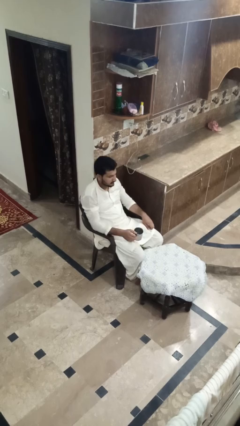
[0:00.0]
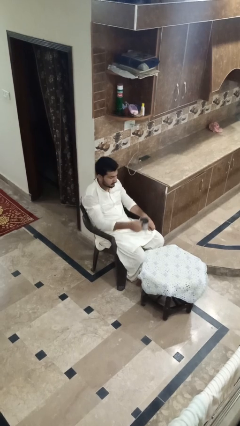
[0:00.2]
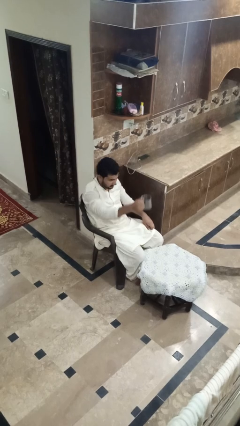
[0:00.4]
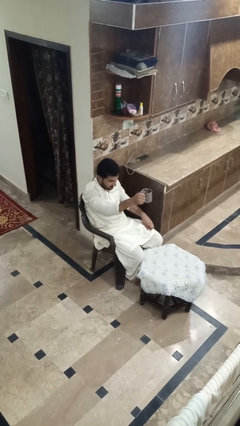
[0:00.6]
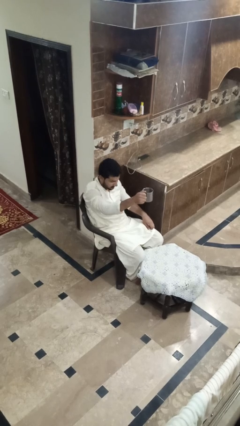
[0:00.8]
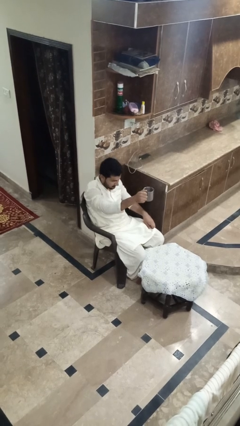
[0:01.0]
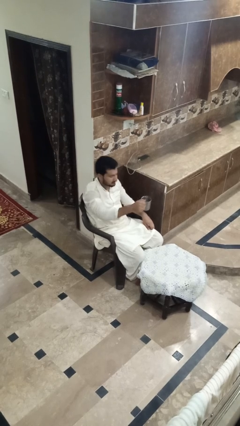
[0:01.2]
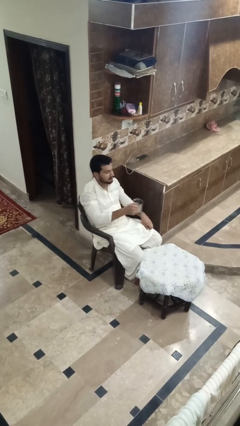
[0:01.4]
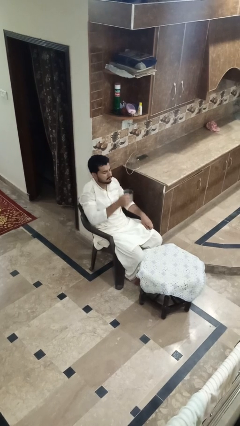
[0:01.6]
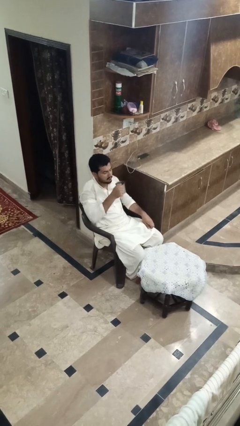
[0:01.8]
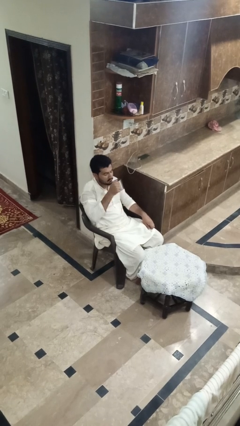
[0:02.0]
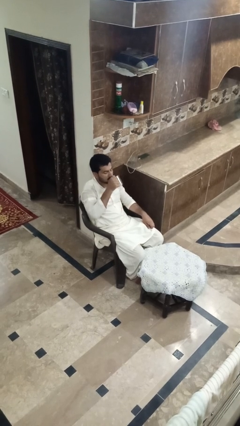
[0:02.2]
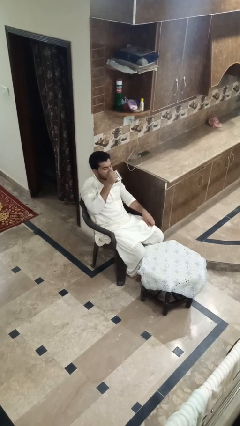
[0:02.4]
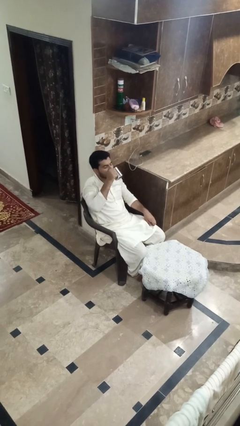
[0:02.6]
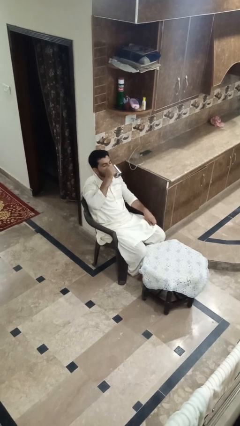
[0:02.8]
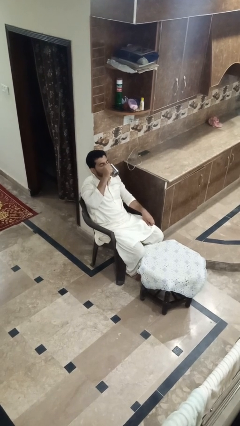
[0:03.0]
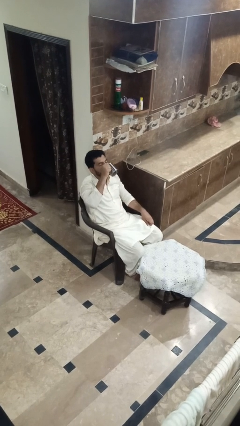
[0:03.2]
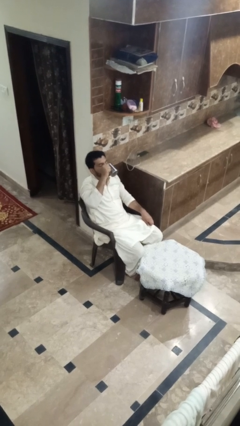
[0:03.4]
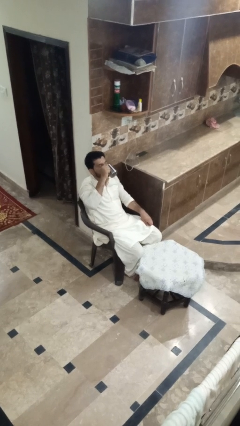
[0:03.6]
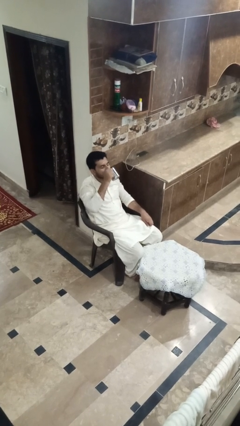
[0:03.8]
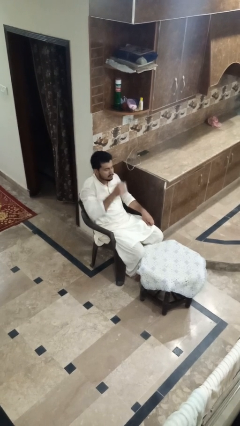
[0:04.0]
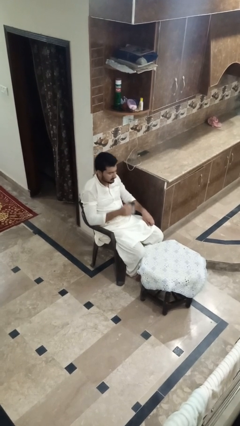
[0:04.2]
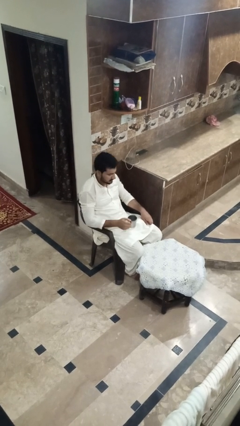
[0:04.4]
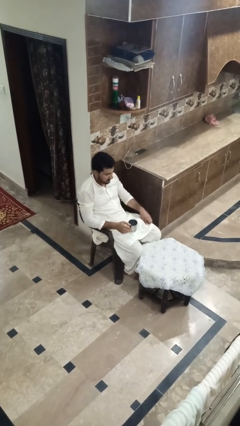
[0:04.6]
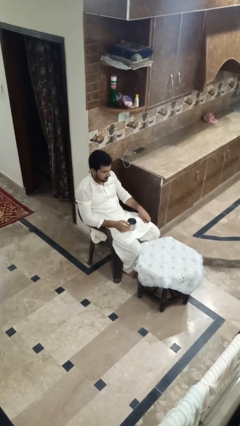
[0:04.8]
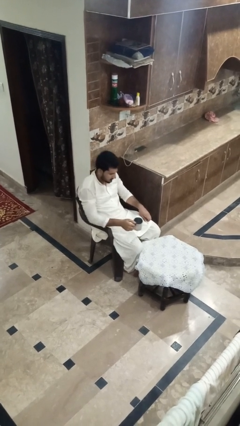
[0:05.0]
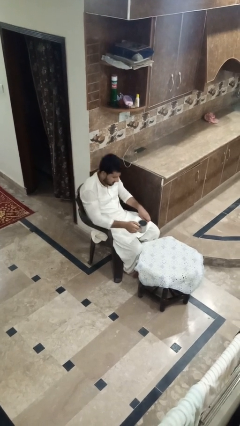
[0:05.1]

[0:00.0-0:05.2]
person drinks from shotglass

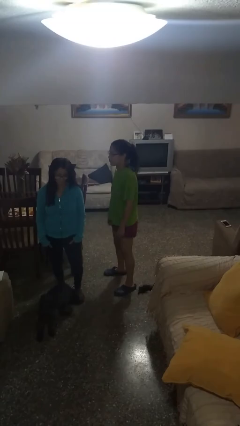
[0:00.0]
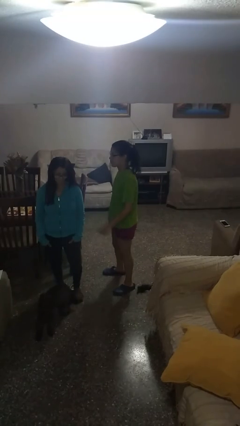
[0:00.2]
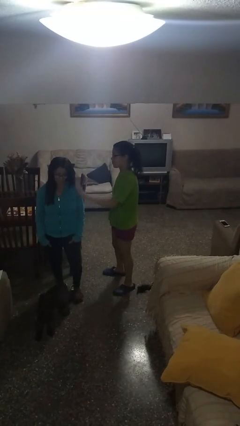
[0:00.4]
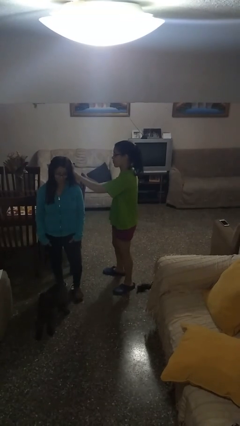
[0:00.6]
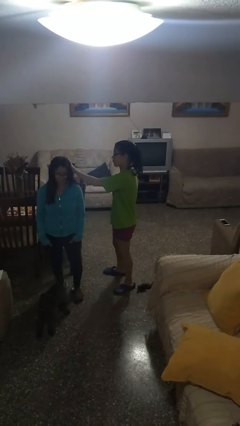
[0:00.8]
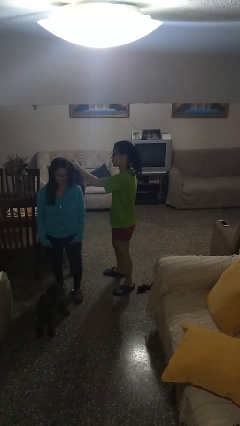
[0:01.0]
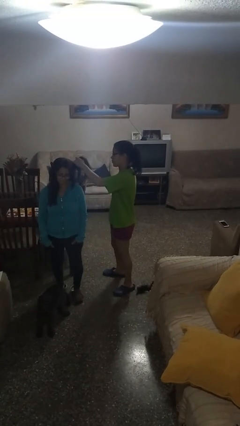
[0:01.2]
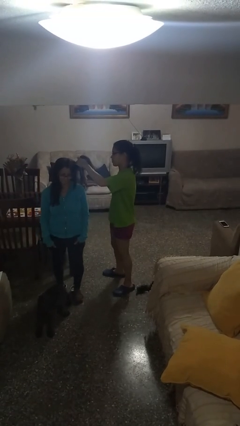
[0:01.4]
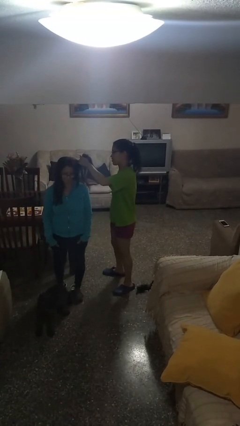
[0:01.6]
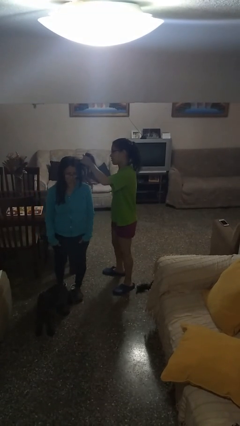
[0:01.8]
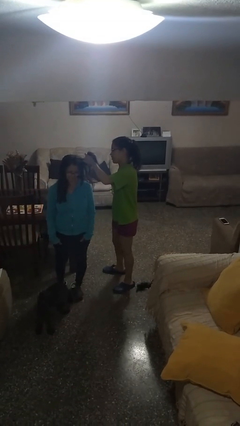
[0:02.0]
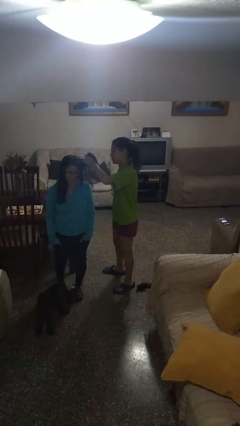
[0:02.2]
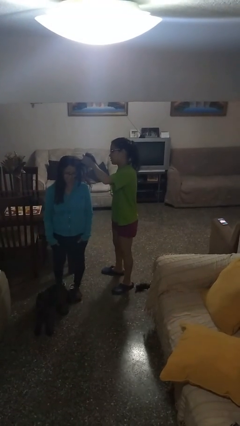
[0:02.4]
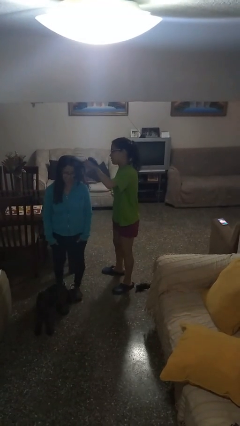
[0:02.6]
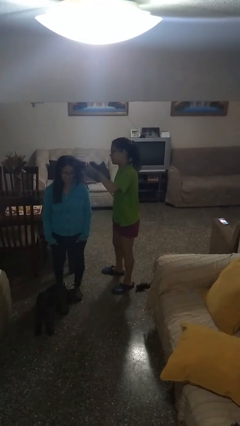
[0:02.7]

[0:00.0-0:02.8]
person grabs person by hair

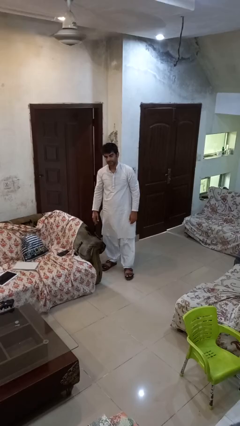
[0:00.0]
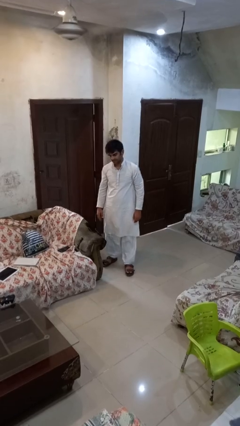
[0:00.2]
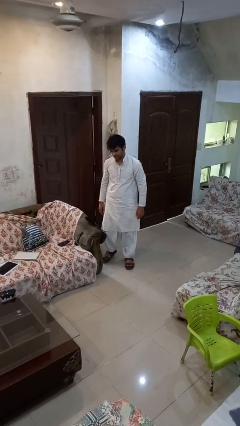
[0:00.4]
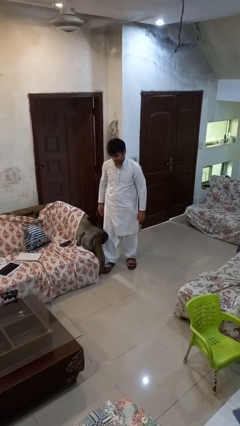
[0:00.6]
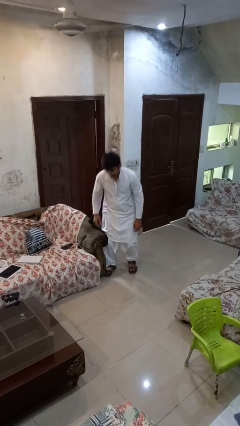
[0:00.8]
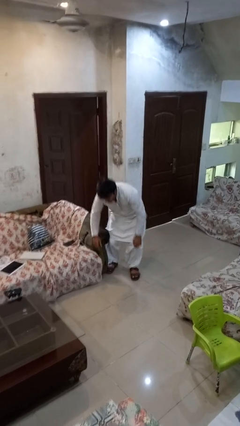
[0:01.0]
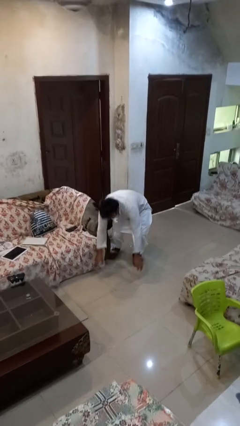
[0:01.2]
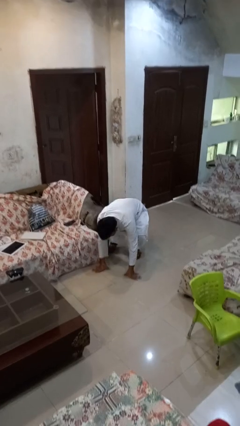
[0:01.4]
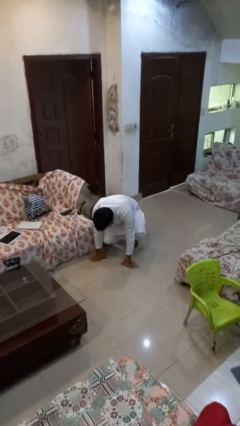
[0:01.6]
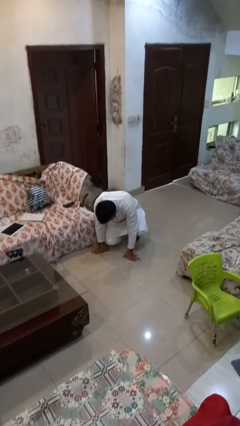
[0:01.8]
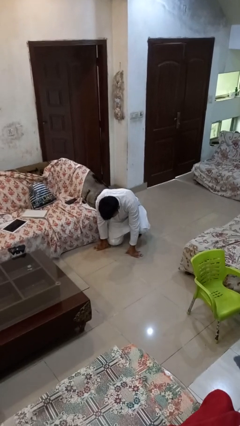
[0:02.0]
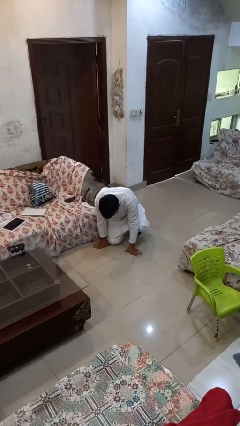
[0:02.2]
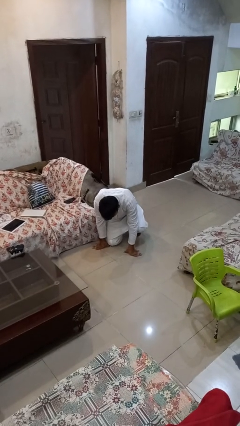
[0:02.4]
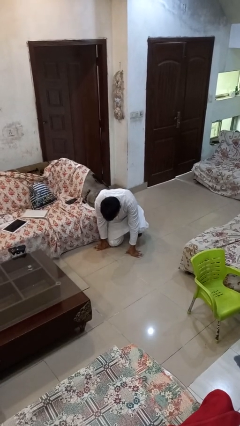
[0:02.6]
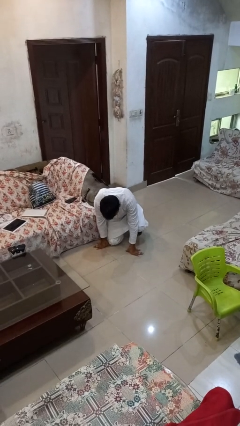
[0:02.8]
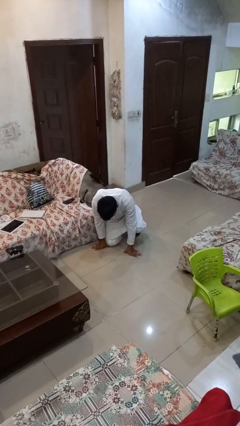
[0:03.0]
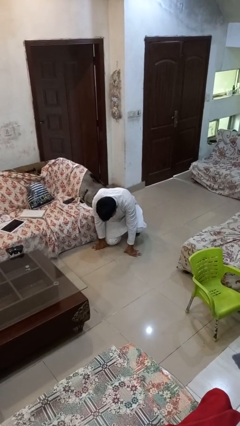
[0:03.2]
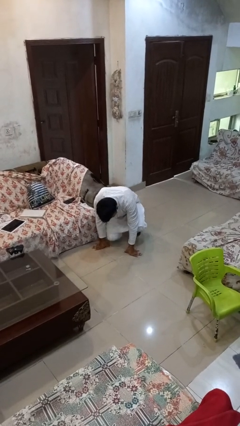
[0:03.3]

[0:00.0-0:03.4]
person trips on object on floor

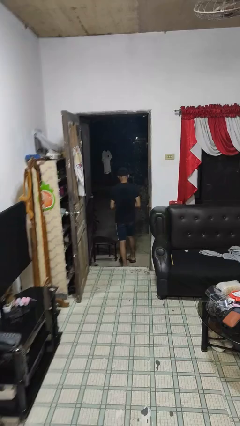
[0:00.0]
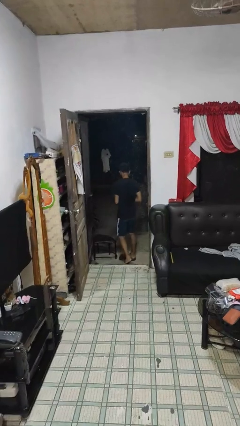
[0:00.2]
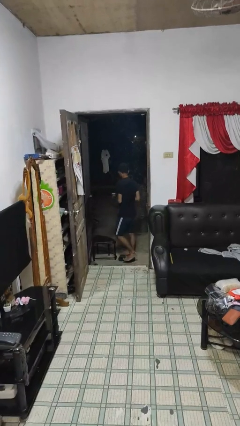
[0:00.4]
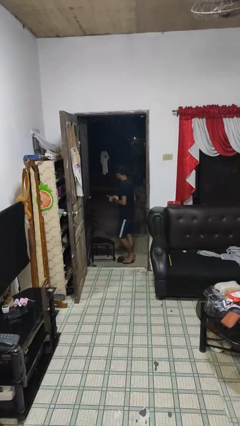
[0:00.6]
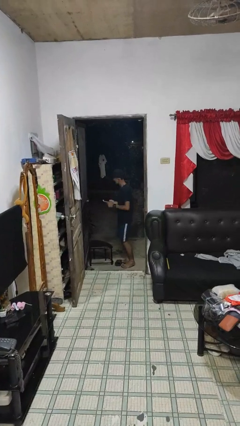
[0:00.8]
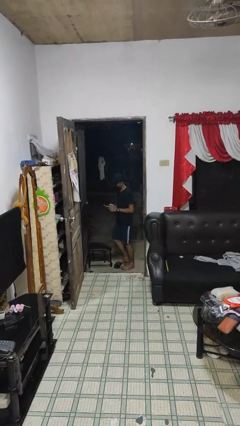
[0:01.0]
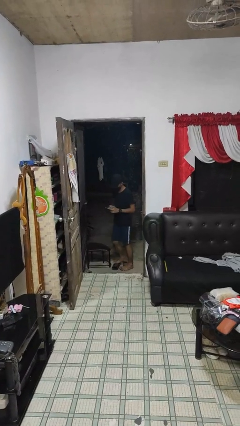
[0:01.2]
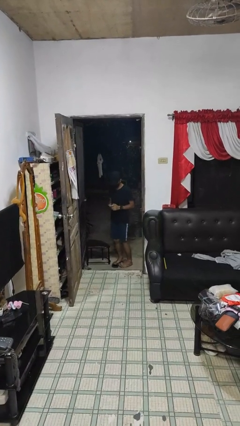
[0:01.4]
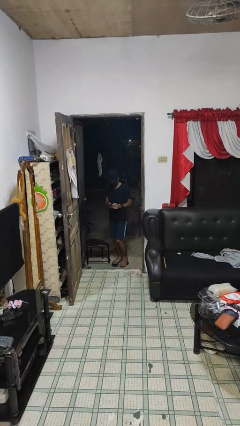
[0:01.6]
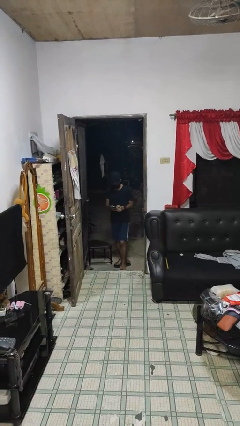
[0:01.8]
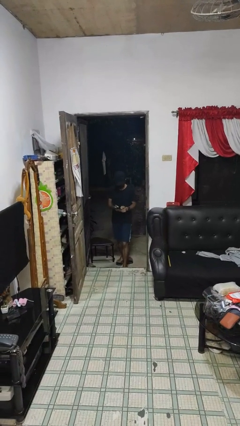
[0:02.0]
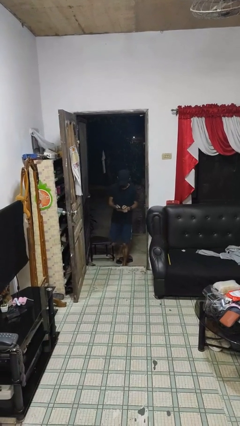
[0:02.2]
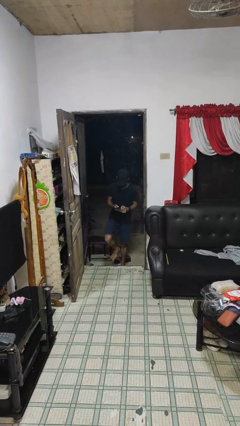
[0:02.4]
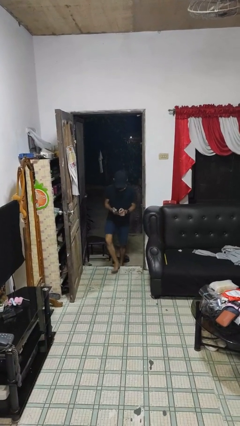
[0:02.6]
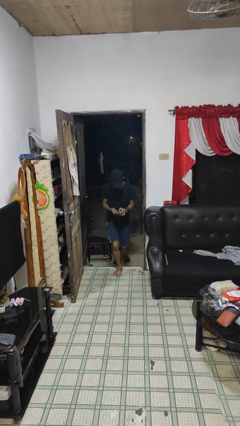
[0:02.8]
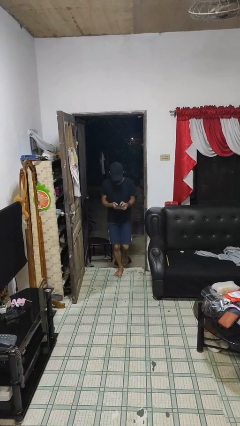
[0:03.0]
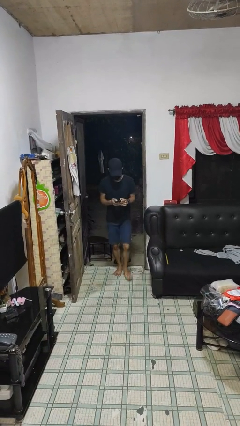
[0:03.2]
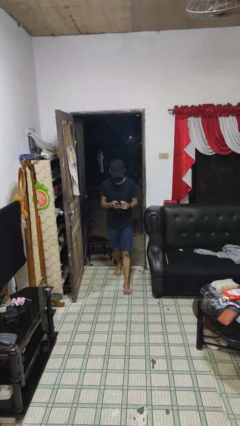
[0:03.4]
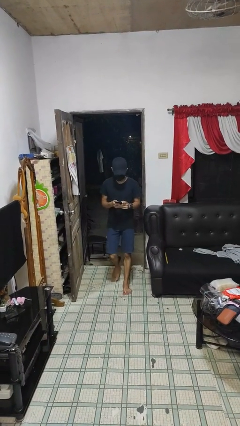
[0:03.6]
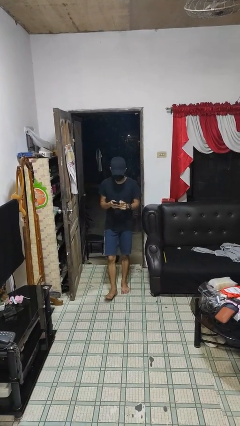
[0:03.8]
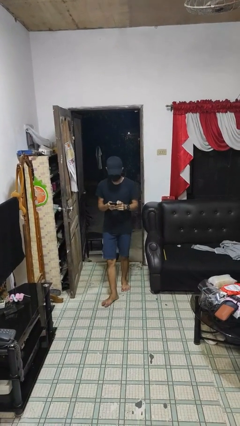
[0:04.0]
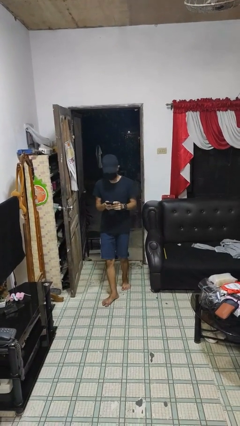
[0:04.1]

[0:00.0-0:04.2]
person enters scene through structure

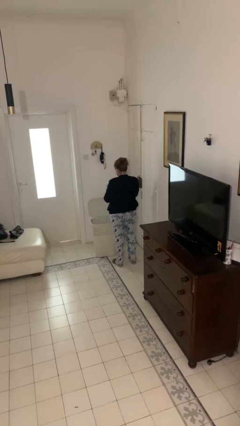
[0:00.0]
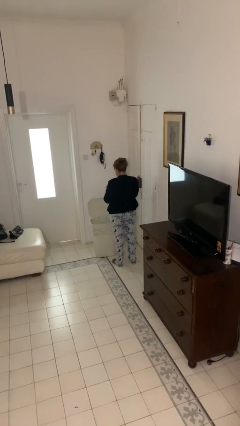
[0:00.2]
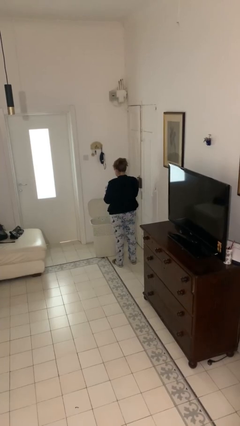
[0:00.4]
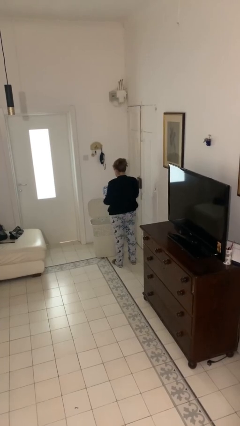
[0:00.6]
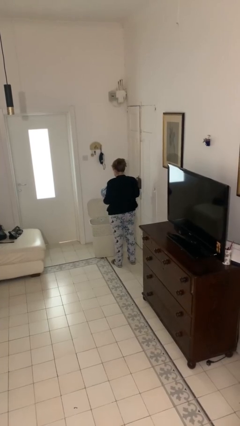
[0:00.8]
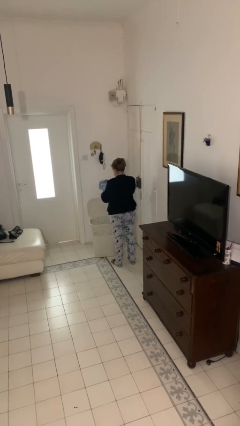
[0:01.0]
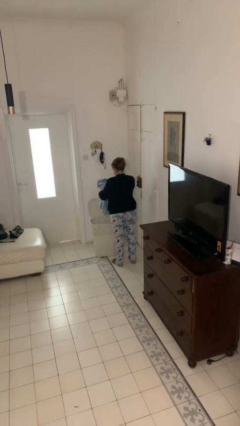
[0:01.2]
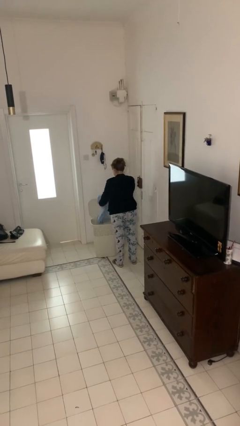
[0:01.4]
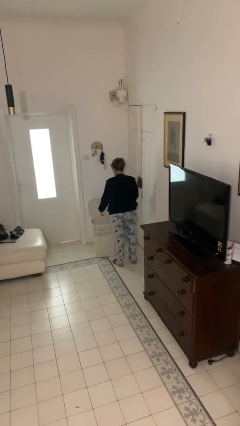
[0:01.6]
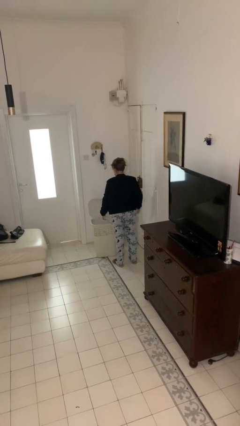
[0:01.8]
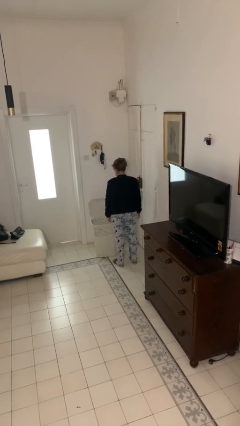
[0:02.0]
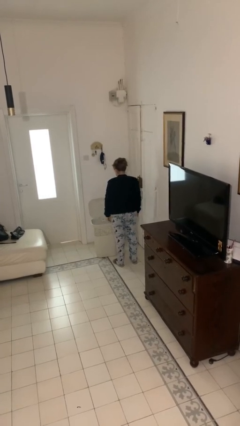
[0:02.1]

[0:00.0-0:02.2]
person puts object into basket
